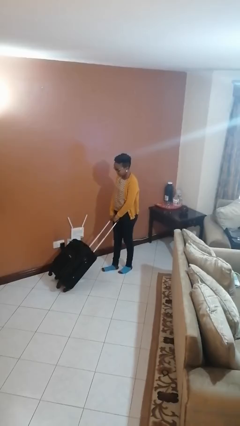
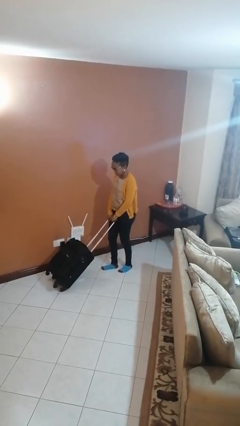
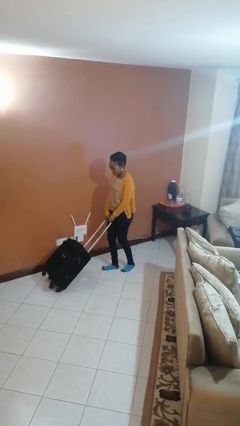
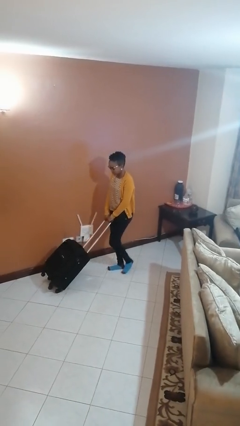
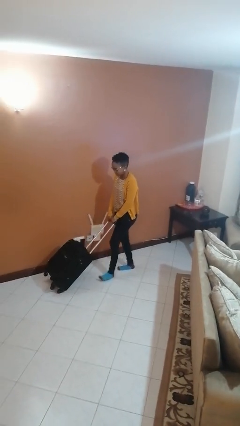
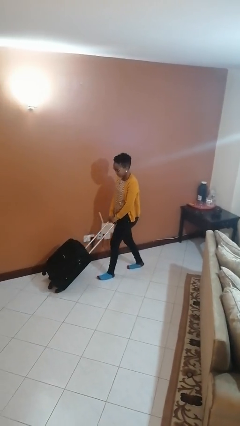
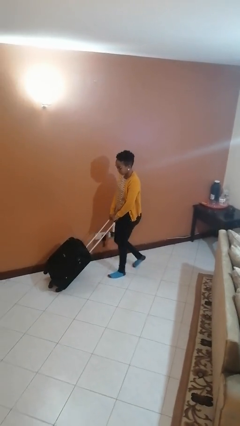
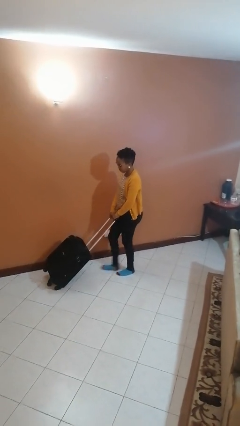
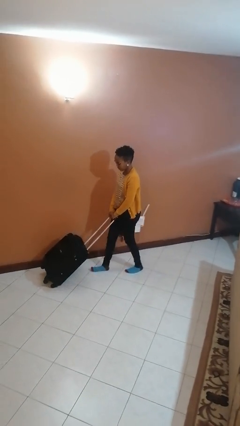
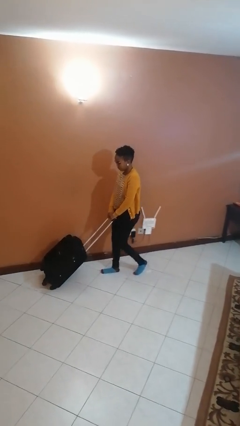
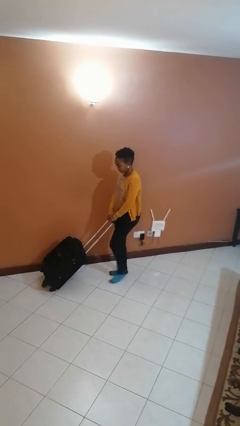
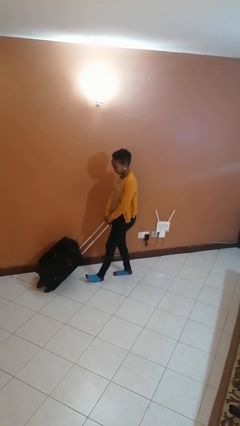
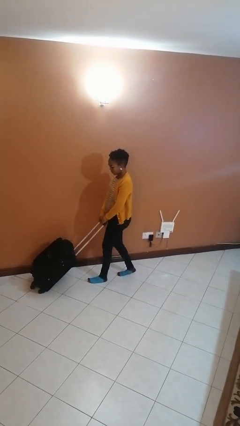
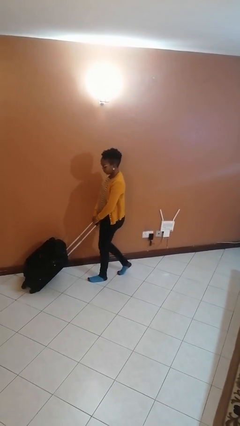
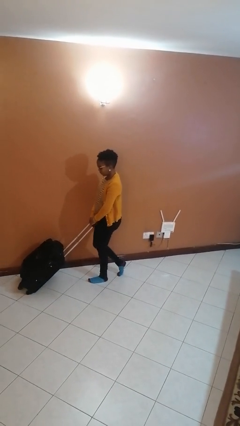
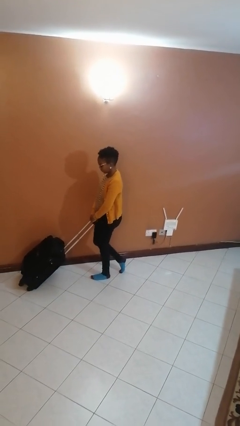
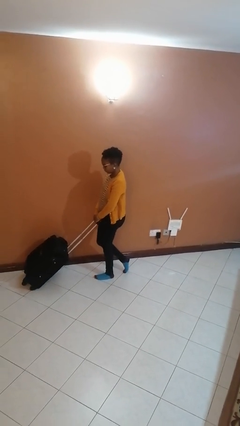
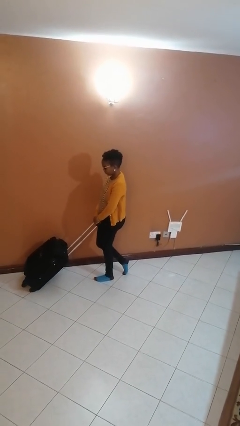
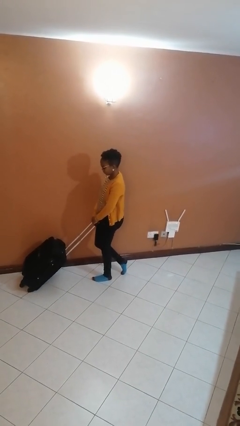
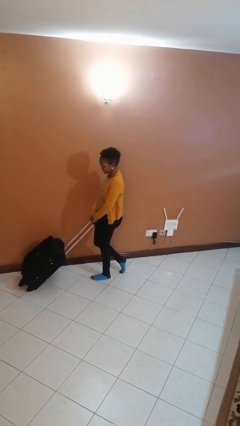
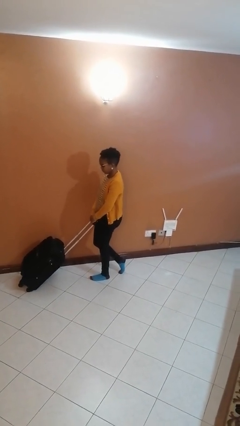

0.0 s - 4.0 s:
person pushes wheeled cart

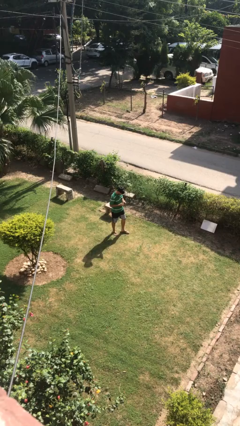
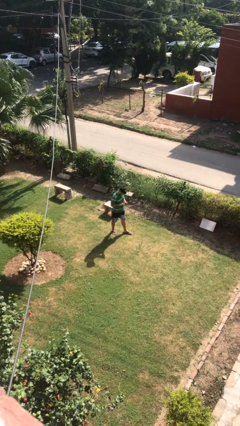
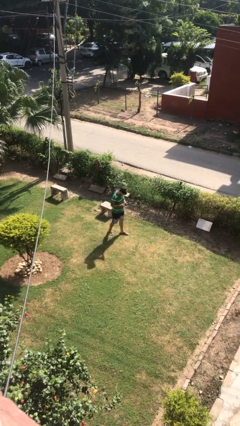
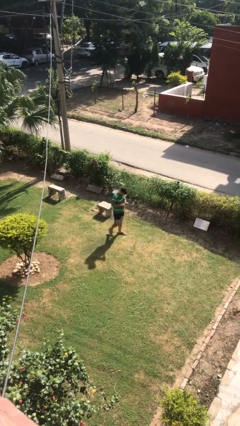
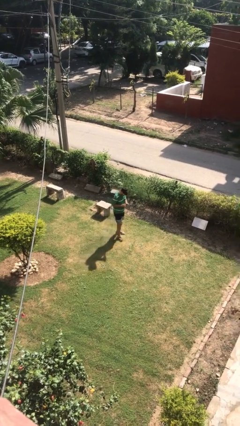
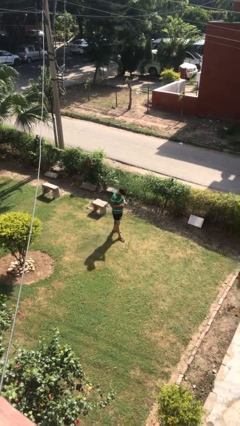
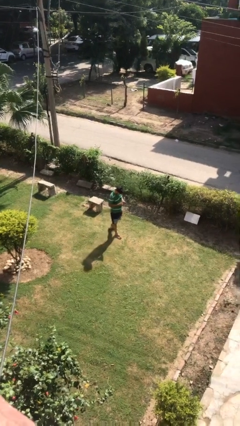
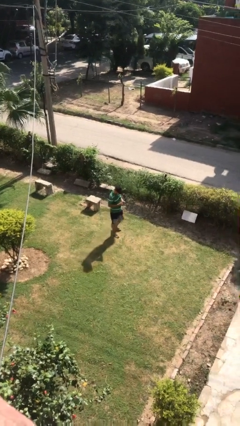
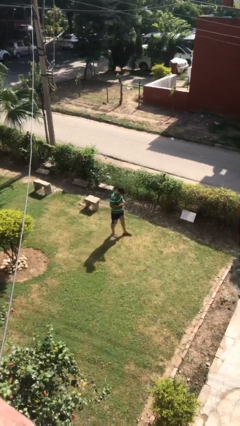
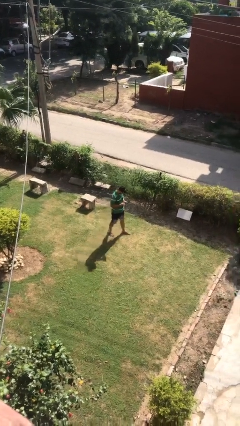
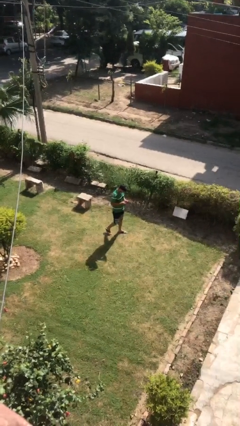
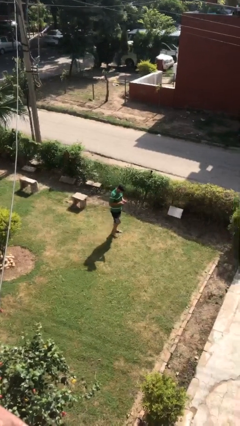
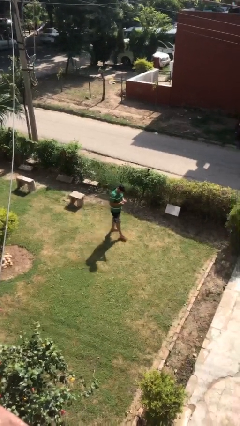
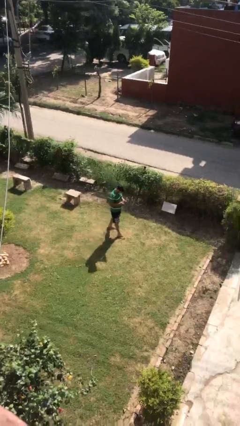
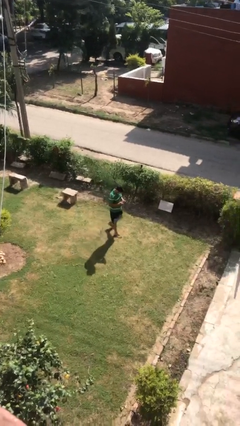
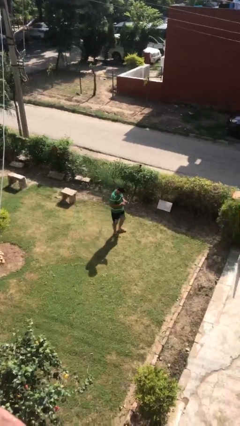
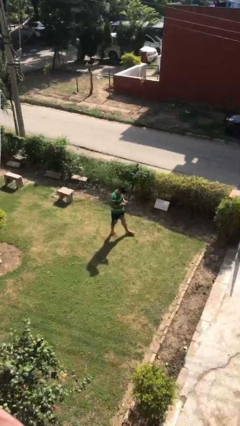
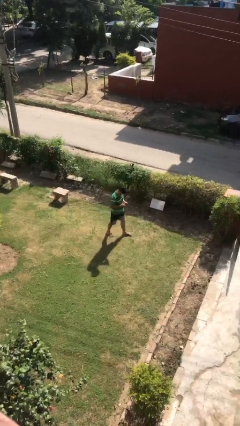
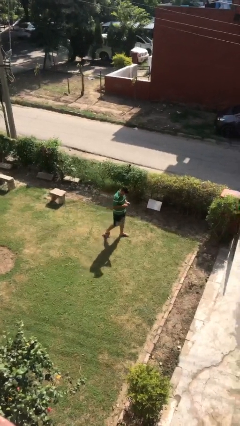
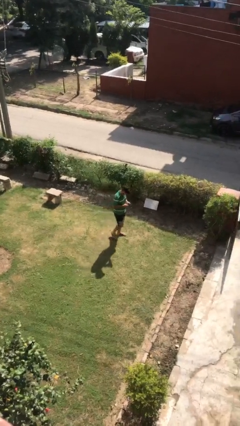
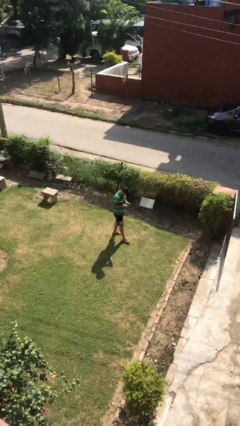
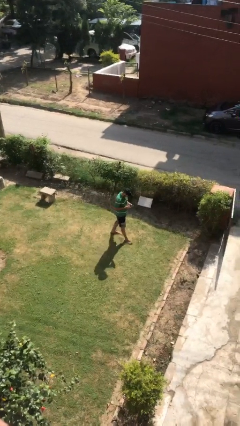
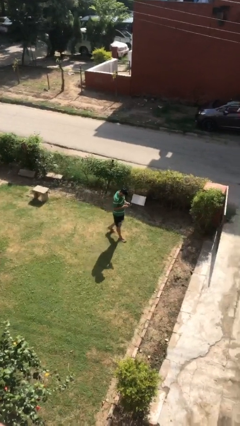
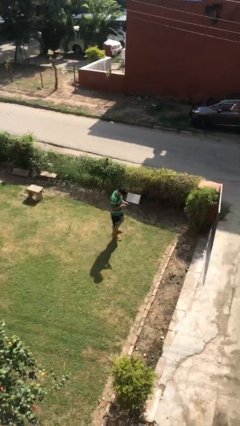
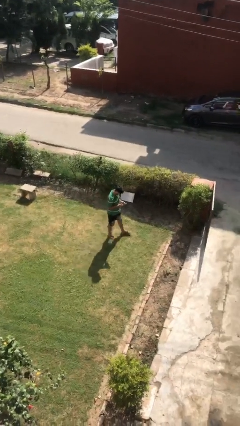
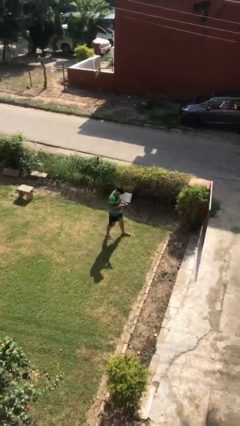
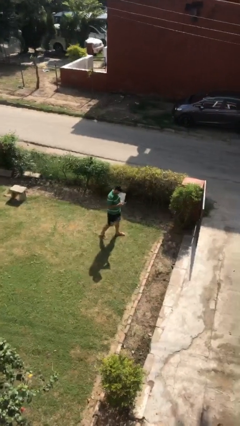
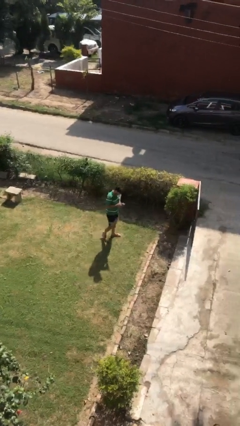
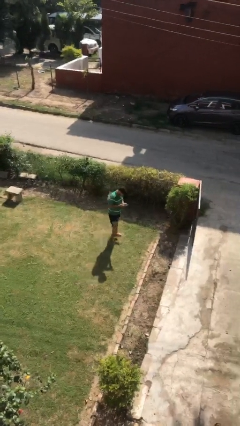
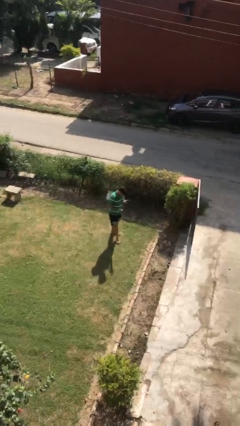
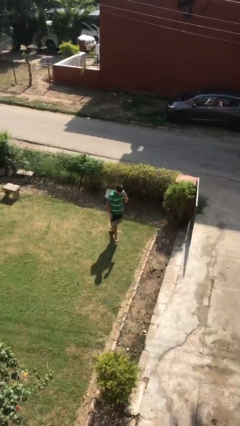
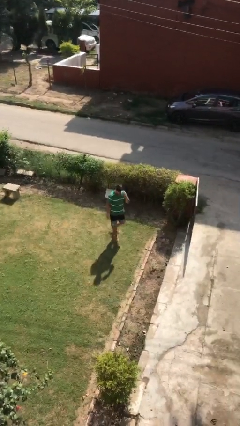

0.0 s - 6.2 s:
person texts on phone

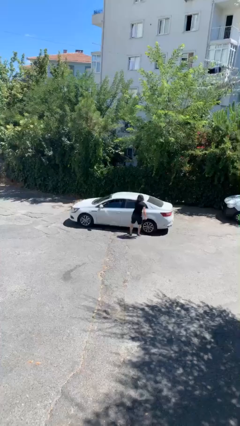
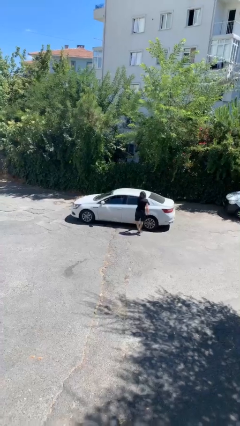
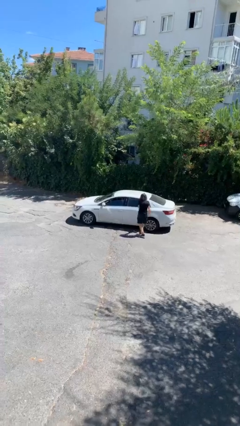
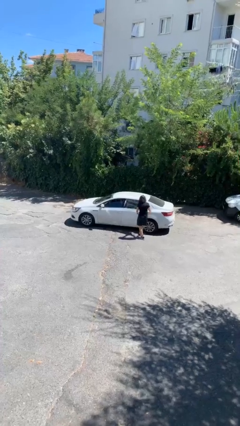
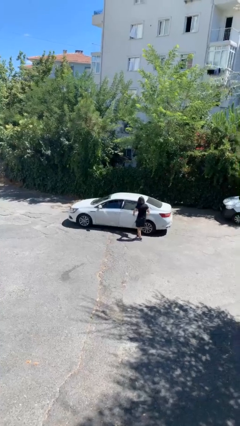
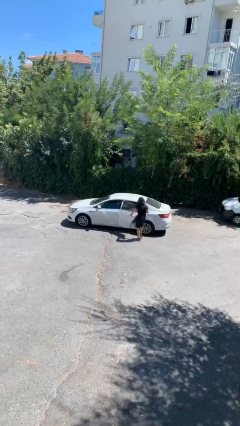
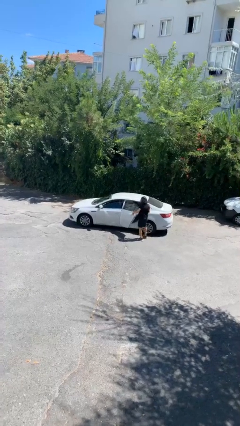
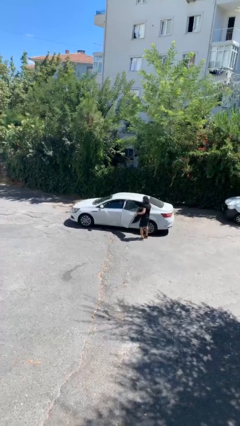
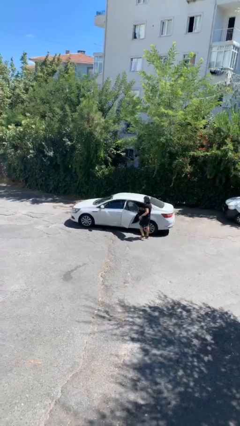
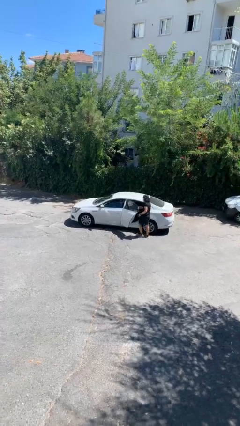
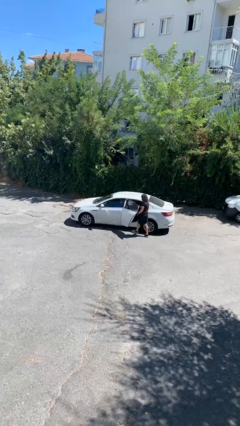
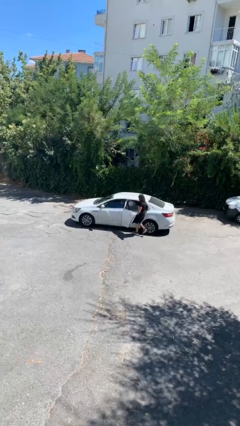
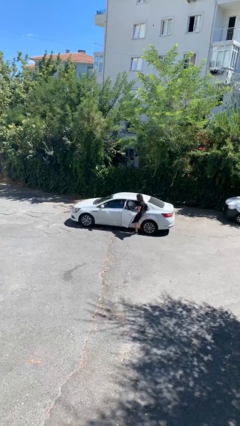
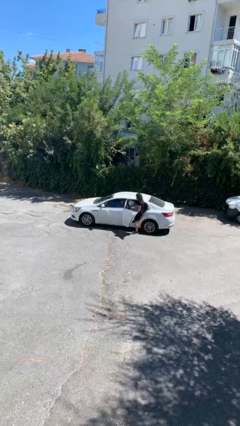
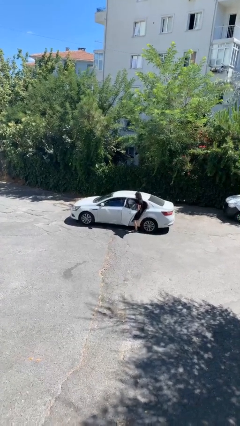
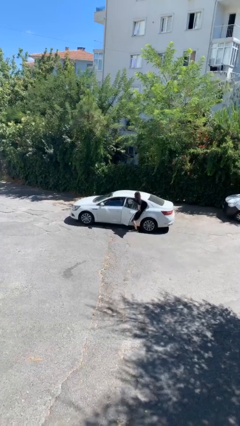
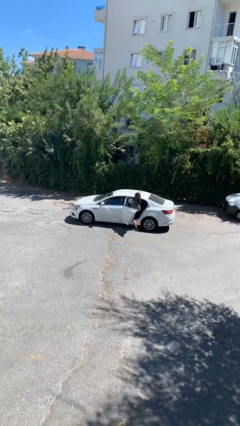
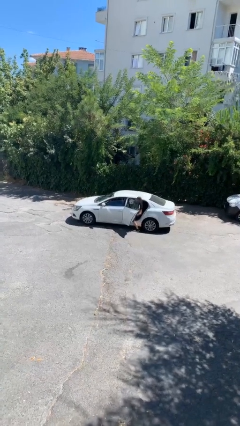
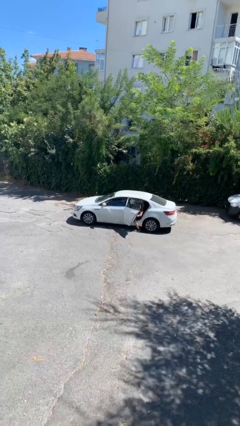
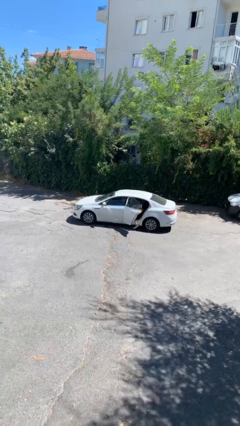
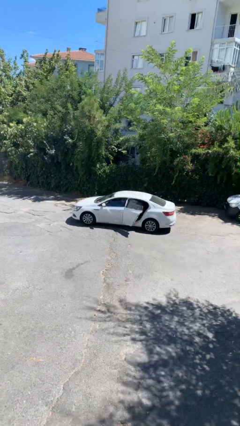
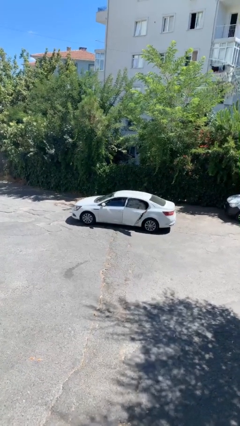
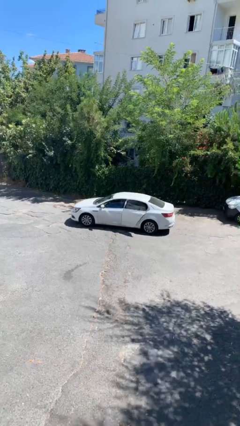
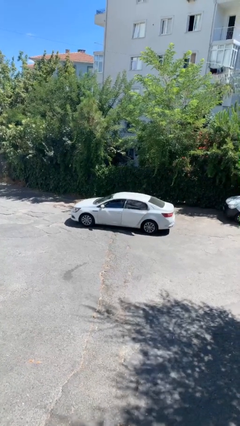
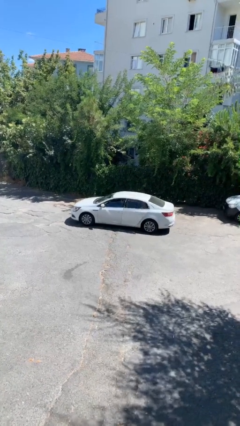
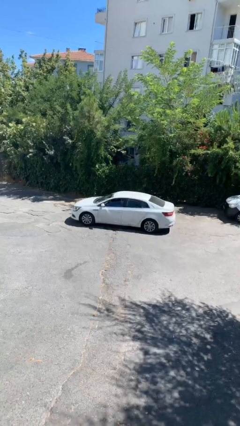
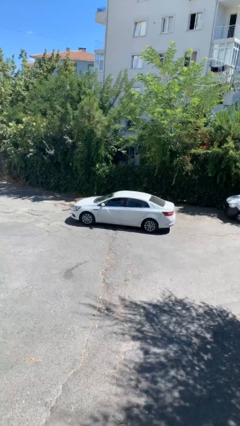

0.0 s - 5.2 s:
car picks up person

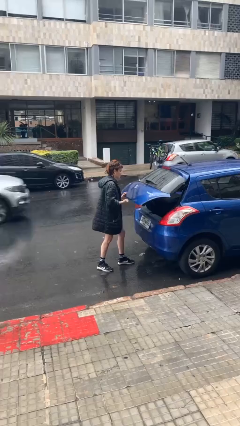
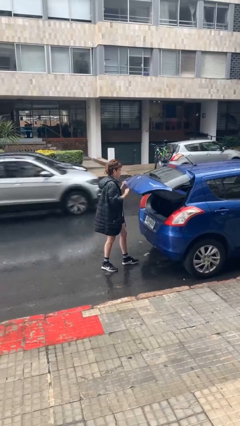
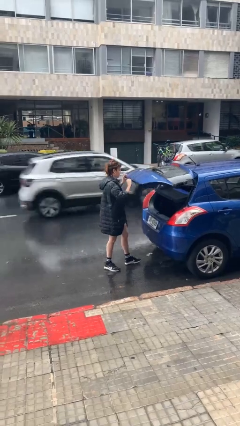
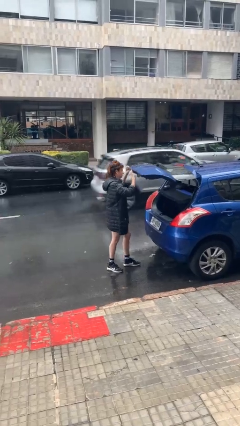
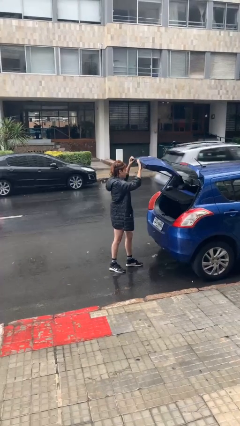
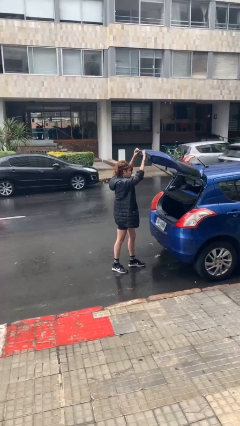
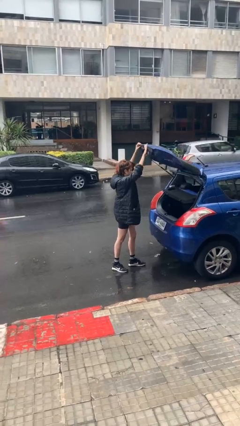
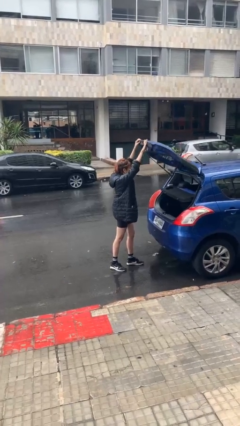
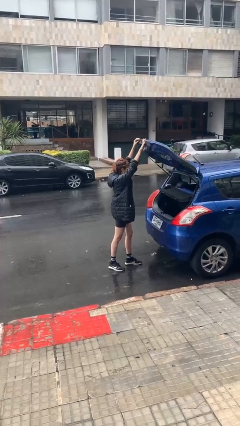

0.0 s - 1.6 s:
person opens car trunk

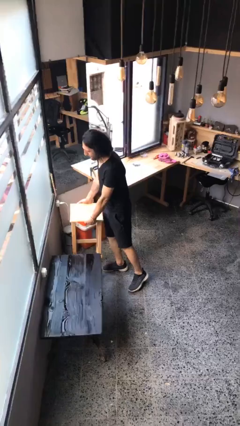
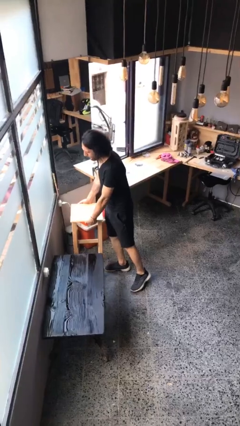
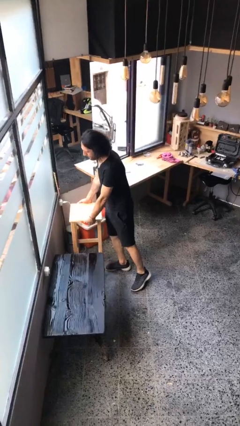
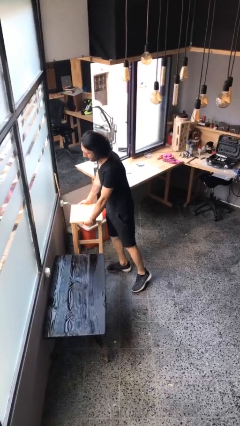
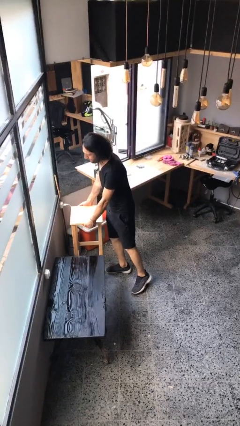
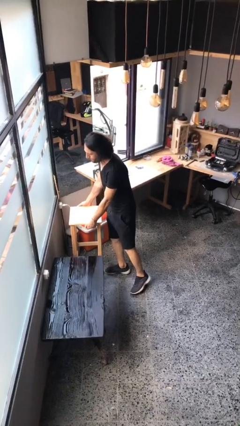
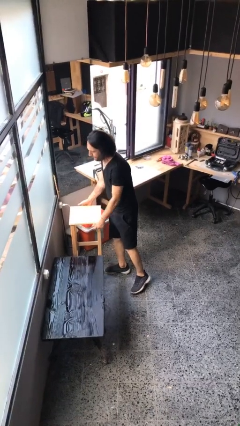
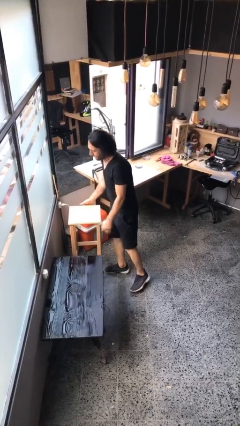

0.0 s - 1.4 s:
person puts down object on floor
